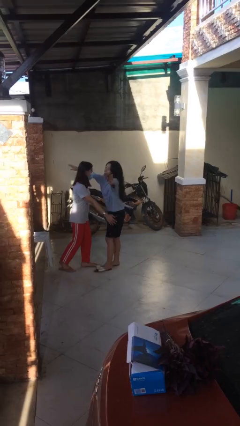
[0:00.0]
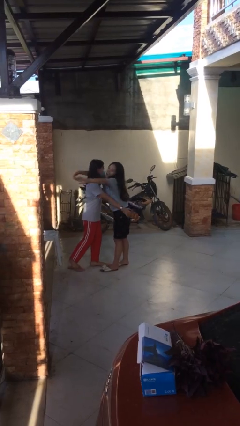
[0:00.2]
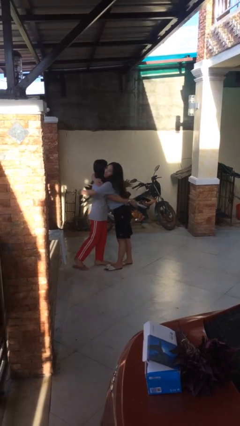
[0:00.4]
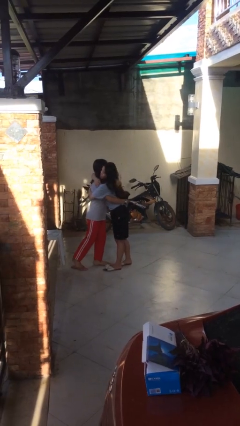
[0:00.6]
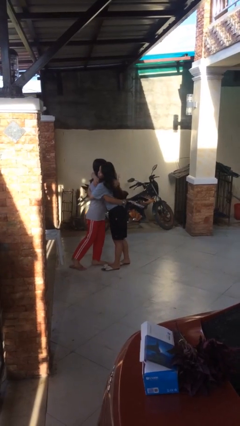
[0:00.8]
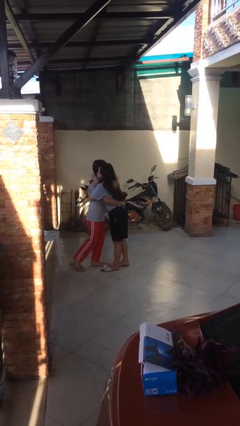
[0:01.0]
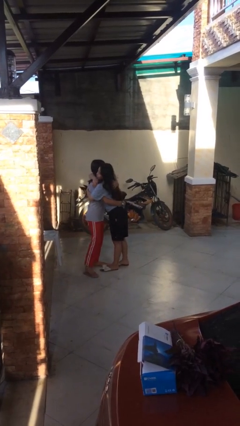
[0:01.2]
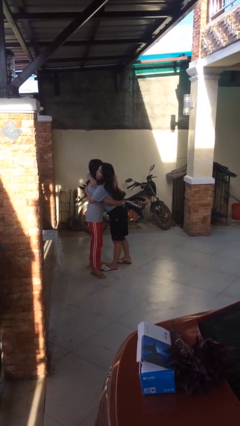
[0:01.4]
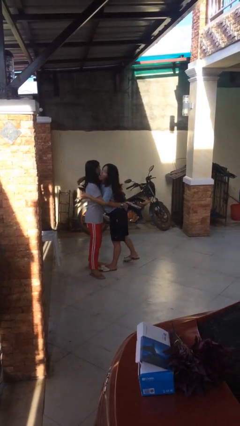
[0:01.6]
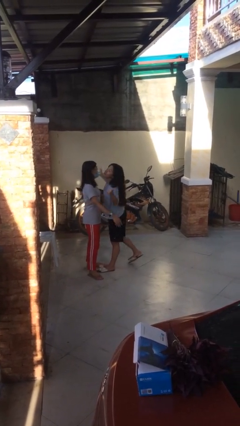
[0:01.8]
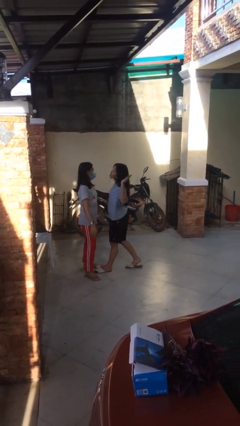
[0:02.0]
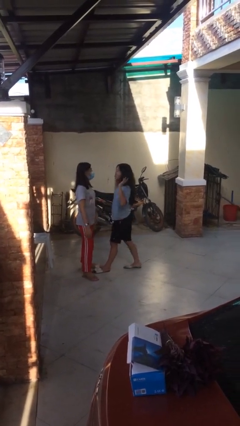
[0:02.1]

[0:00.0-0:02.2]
person embraces person

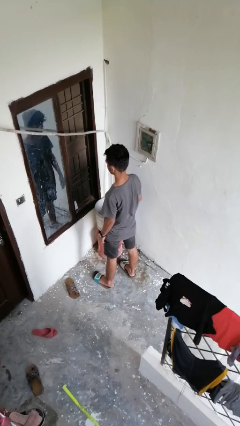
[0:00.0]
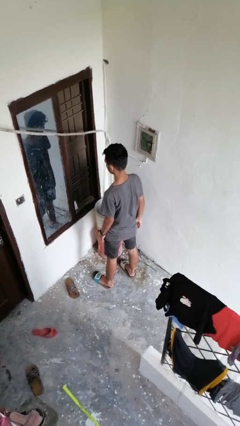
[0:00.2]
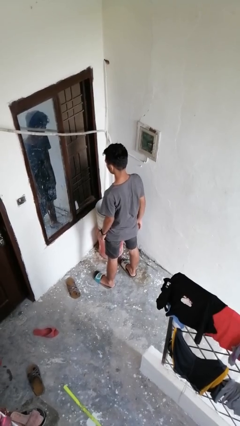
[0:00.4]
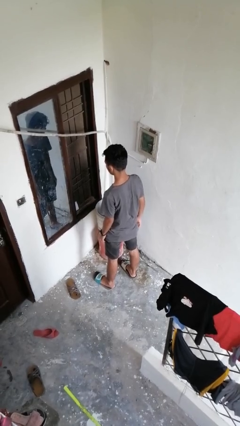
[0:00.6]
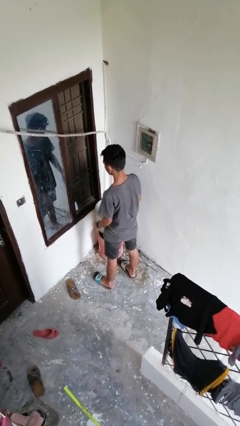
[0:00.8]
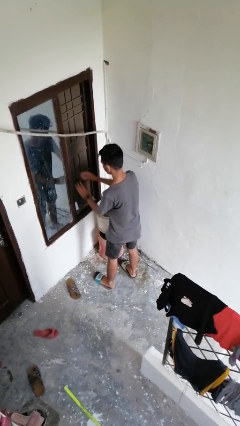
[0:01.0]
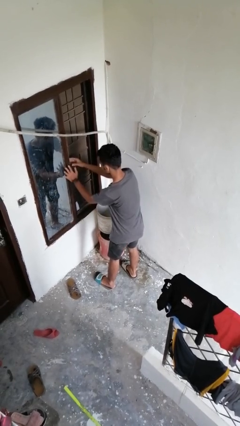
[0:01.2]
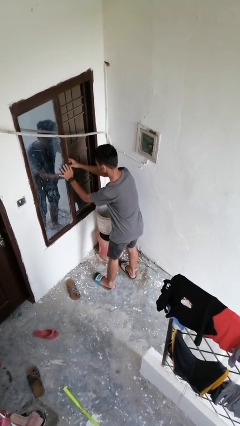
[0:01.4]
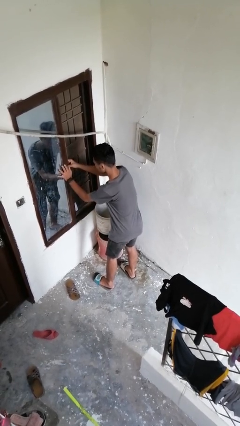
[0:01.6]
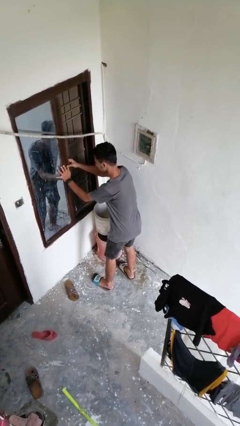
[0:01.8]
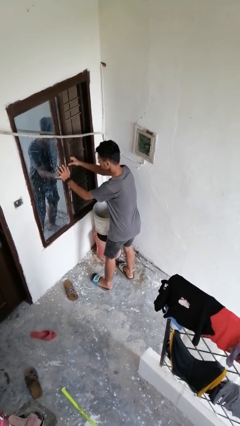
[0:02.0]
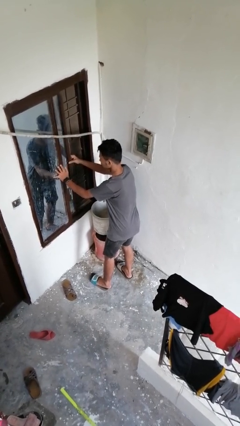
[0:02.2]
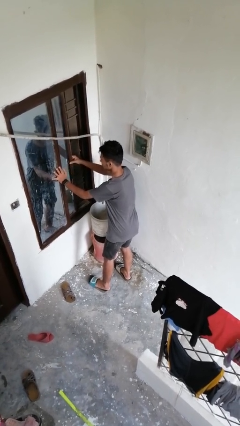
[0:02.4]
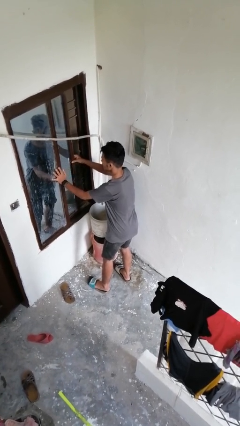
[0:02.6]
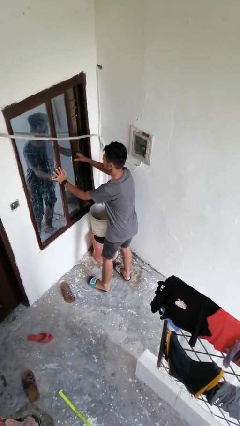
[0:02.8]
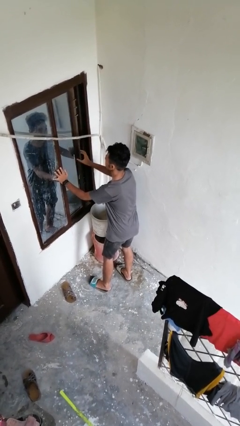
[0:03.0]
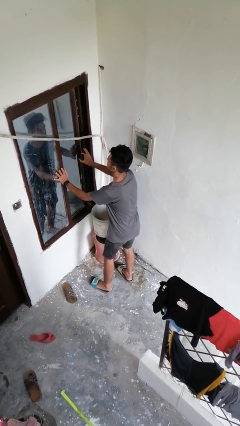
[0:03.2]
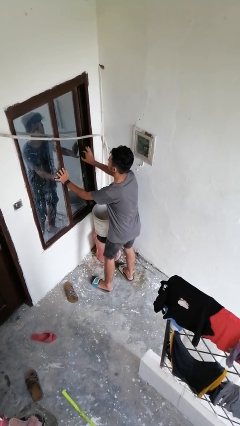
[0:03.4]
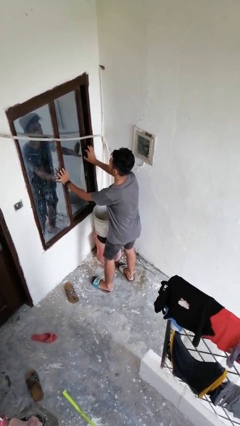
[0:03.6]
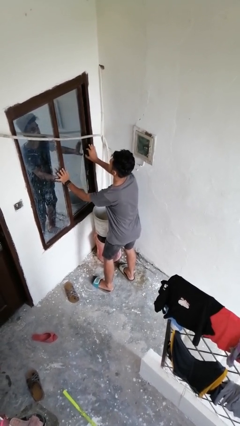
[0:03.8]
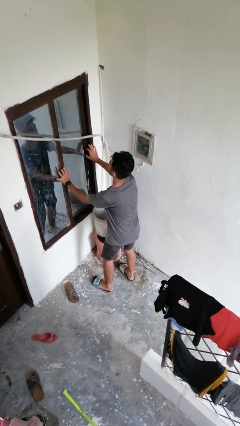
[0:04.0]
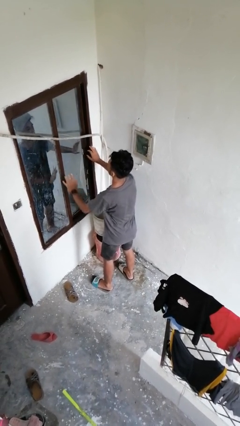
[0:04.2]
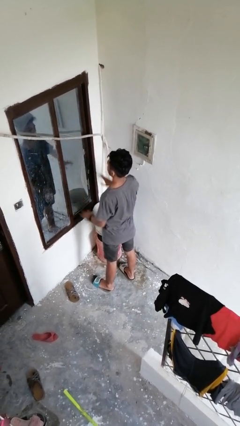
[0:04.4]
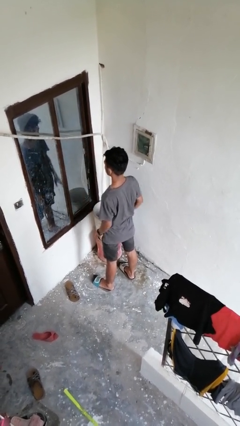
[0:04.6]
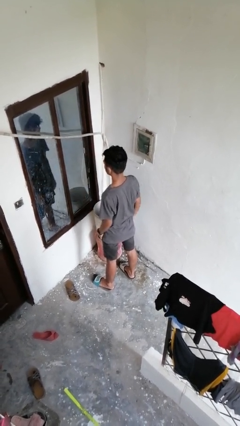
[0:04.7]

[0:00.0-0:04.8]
person closes home window

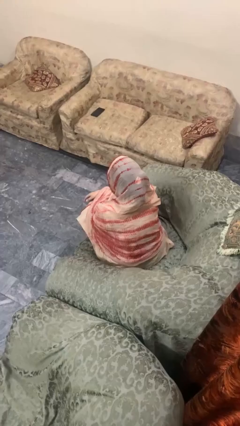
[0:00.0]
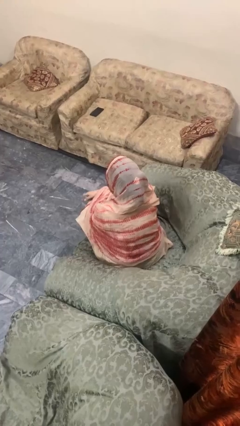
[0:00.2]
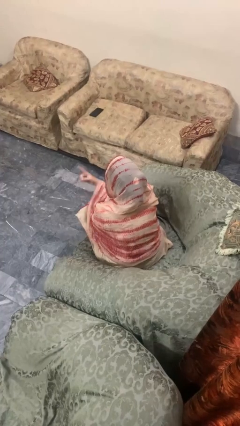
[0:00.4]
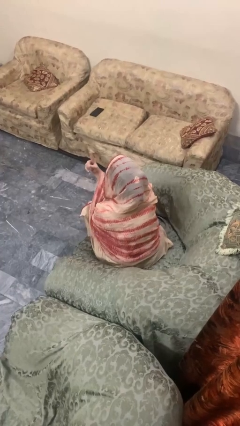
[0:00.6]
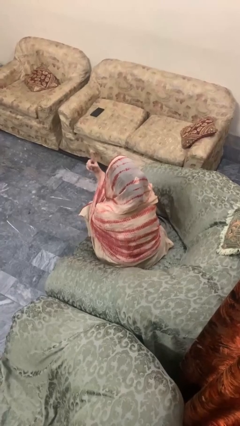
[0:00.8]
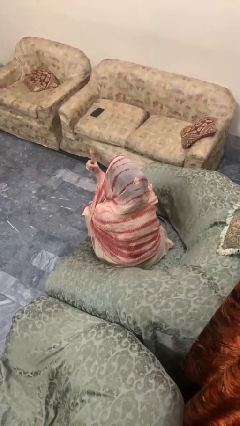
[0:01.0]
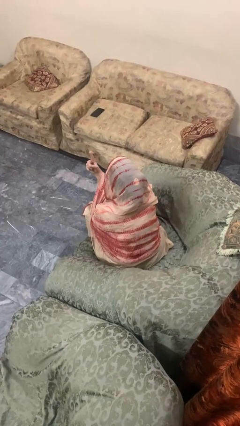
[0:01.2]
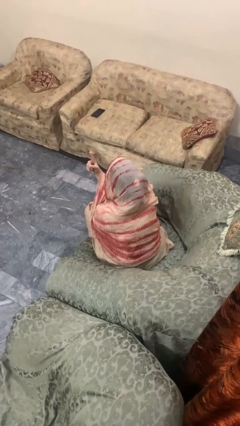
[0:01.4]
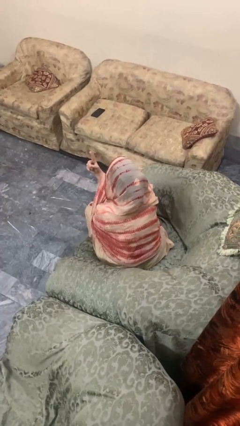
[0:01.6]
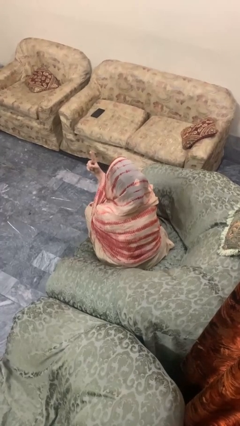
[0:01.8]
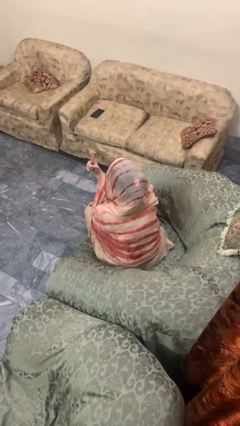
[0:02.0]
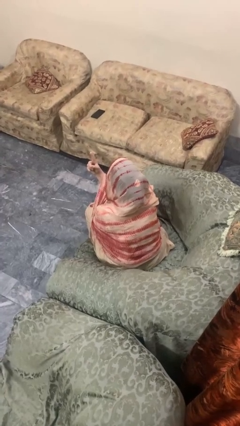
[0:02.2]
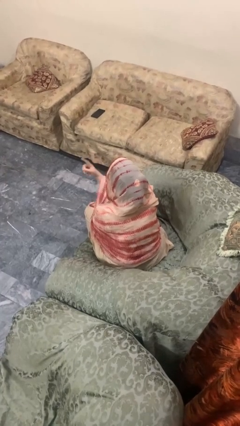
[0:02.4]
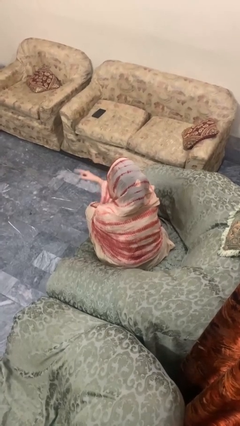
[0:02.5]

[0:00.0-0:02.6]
person gestures number one

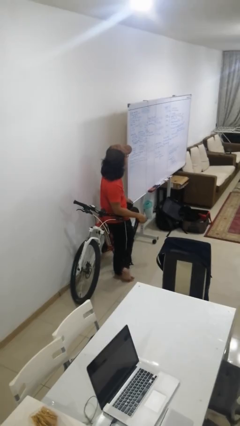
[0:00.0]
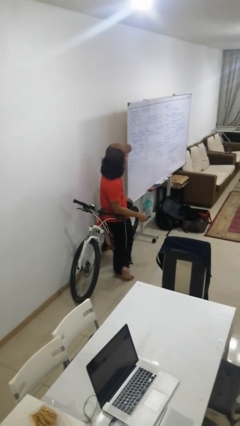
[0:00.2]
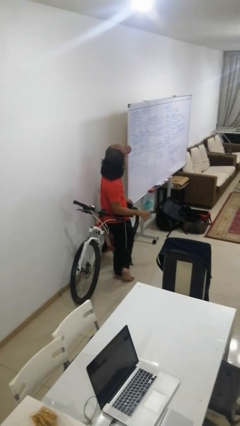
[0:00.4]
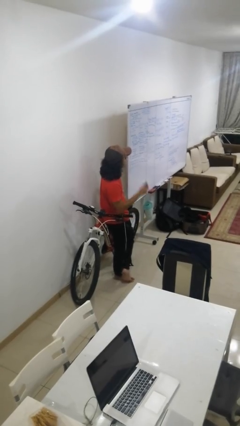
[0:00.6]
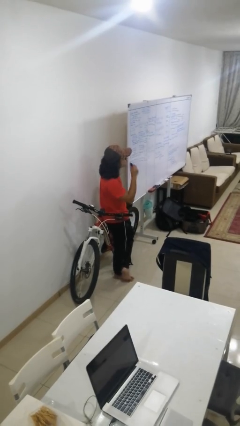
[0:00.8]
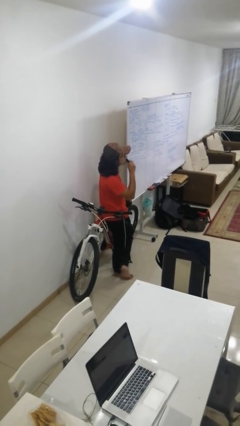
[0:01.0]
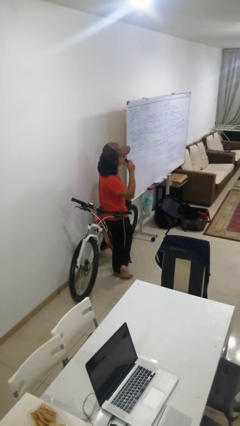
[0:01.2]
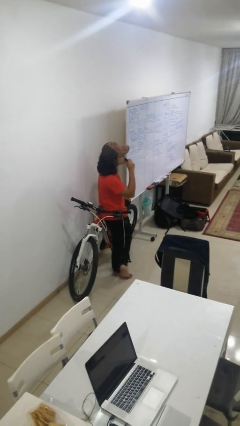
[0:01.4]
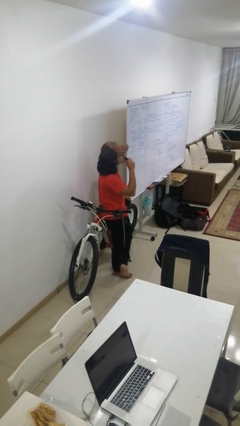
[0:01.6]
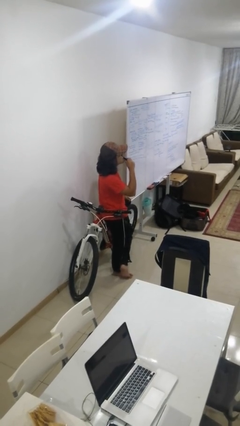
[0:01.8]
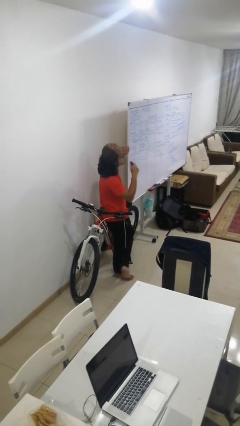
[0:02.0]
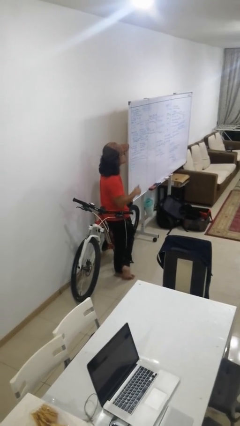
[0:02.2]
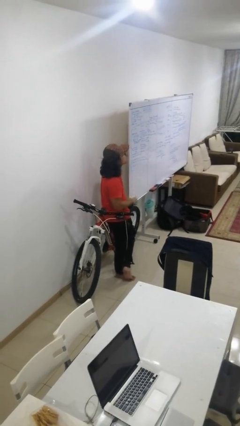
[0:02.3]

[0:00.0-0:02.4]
person vapes

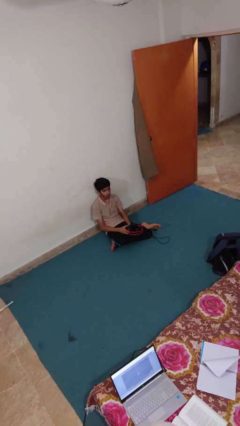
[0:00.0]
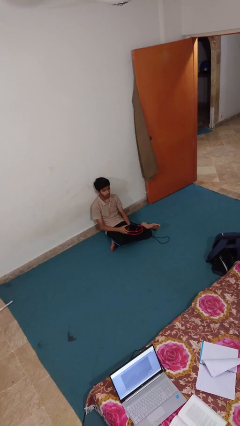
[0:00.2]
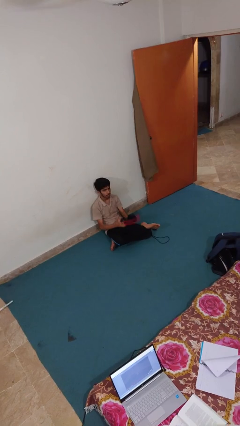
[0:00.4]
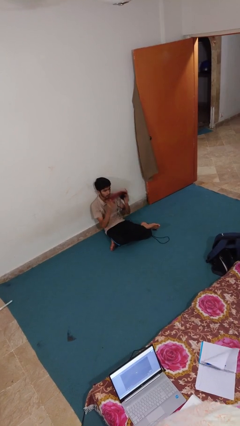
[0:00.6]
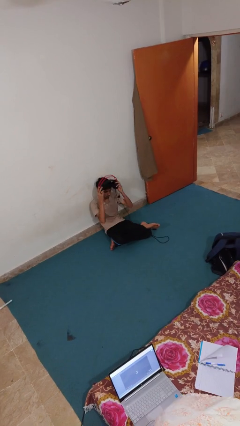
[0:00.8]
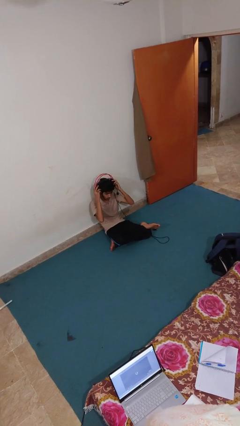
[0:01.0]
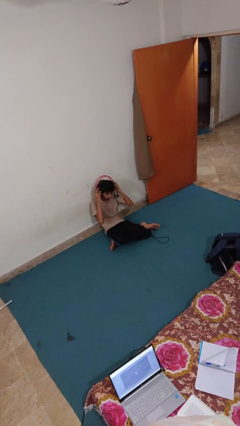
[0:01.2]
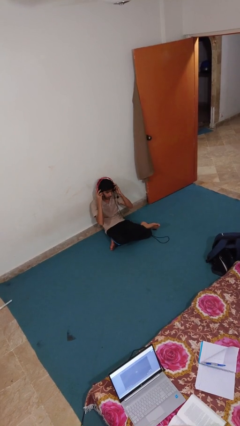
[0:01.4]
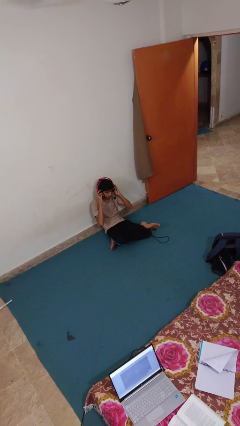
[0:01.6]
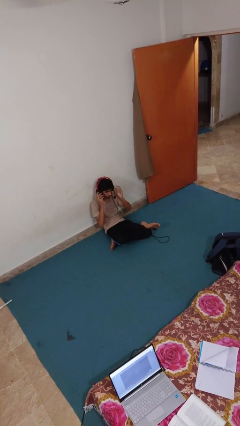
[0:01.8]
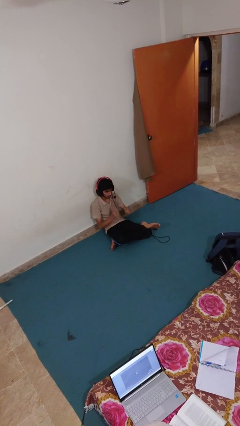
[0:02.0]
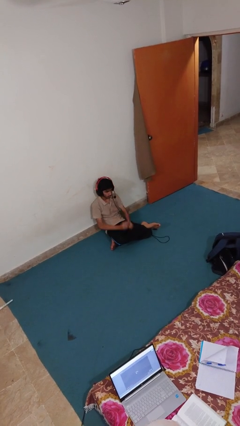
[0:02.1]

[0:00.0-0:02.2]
person puts on headphones

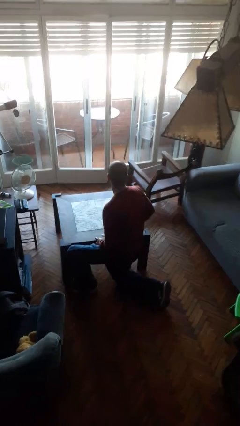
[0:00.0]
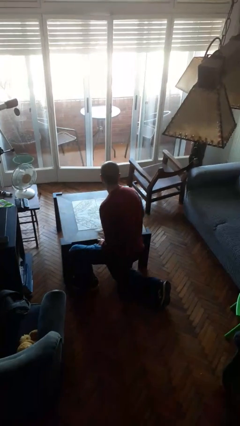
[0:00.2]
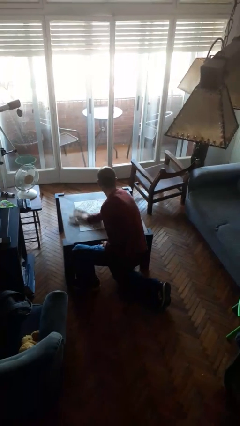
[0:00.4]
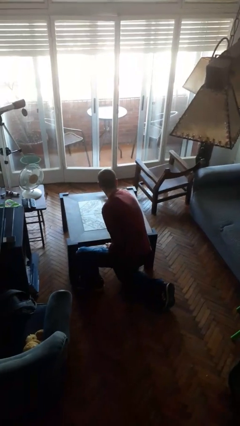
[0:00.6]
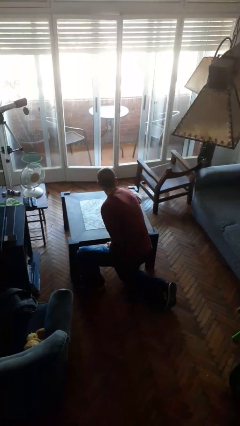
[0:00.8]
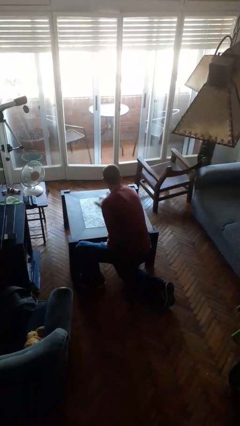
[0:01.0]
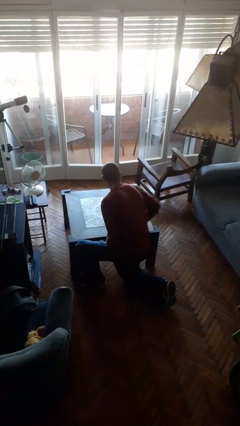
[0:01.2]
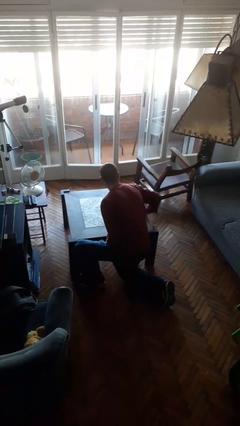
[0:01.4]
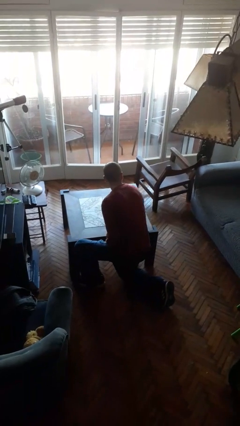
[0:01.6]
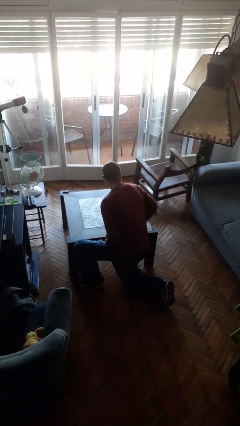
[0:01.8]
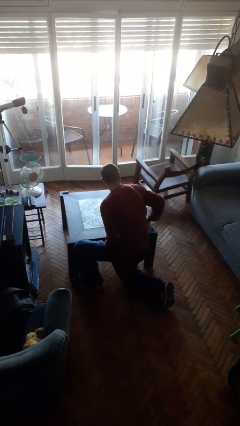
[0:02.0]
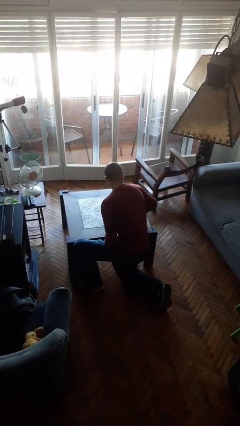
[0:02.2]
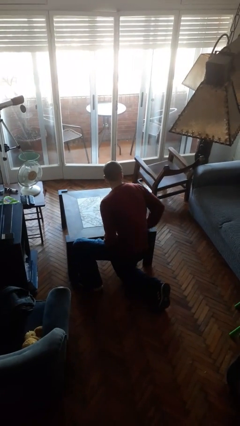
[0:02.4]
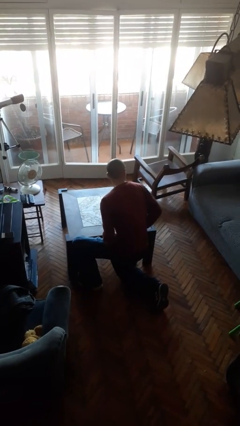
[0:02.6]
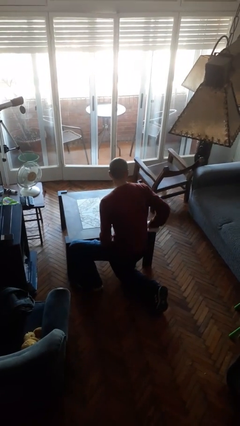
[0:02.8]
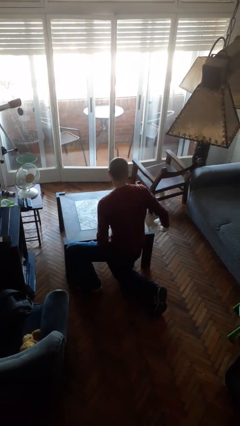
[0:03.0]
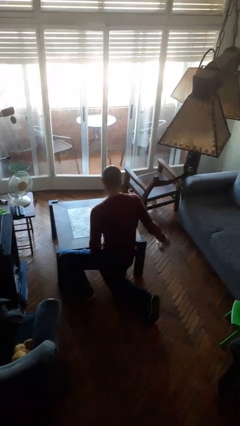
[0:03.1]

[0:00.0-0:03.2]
person cleans table with rag
